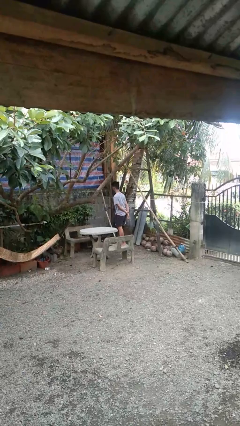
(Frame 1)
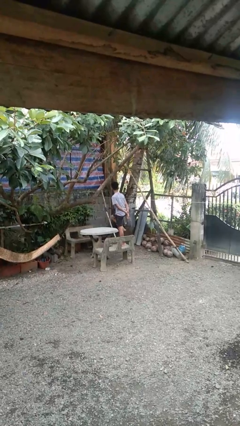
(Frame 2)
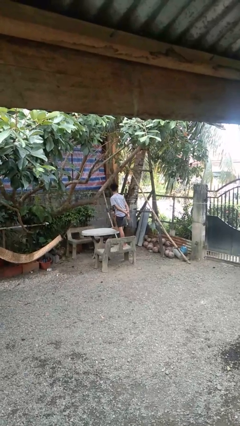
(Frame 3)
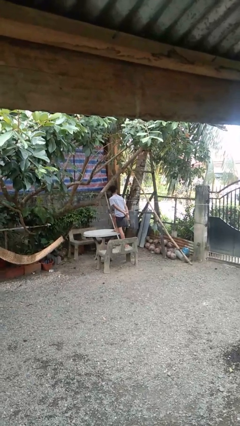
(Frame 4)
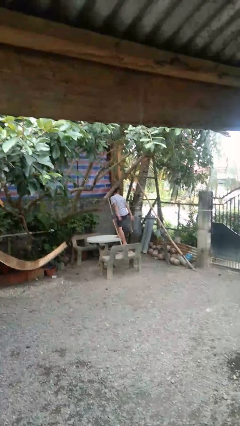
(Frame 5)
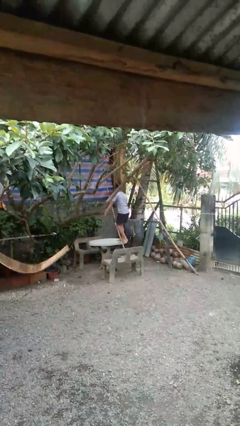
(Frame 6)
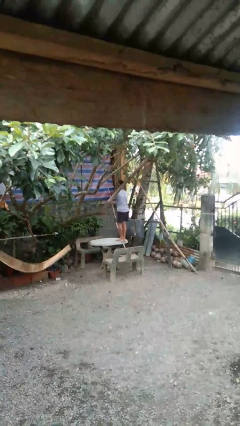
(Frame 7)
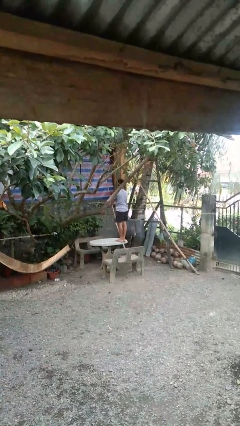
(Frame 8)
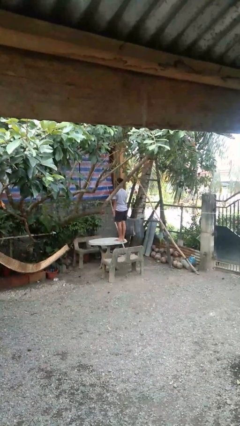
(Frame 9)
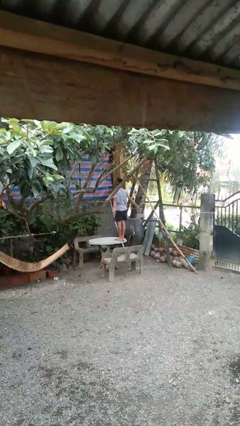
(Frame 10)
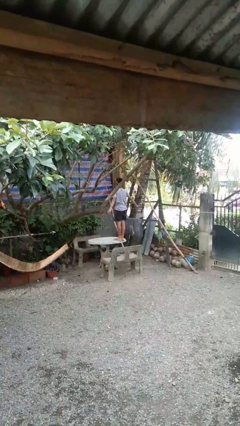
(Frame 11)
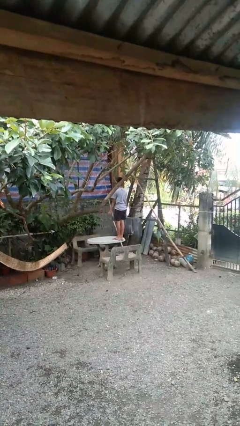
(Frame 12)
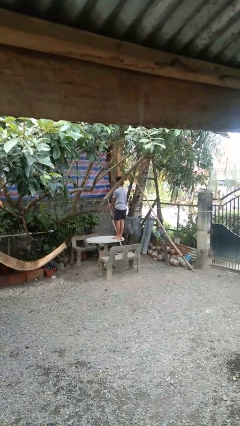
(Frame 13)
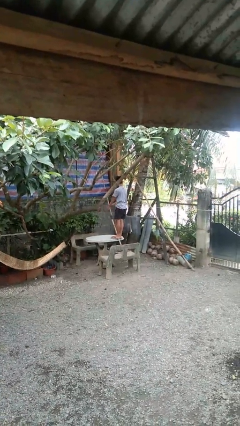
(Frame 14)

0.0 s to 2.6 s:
person climbs on table

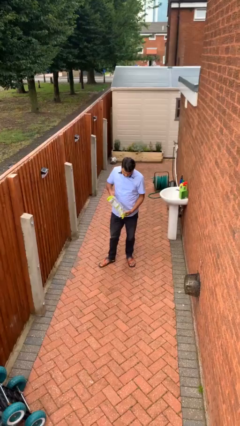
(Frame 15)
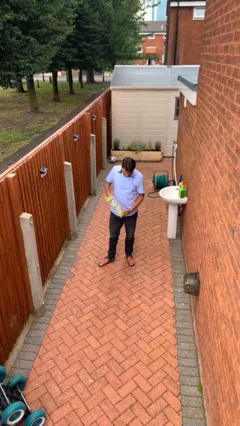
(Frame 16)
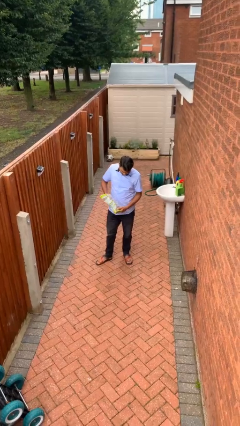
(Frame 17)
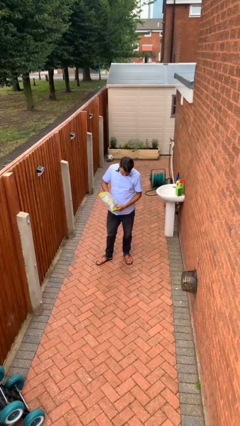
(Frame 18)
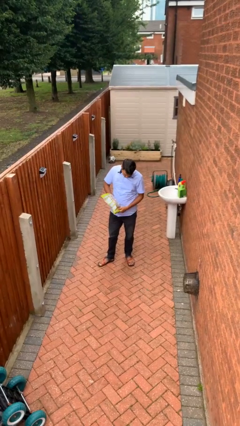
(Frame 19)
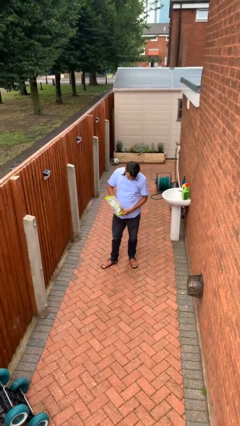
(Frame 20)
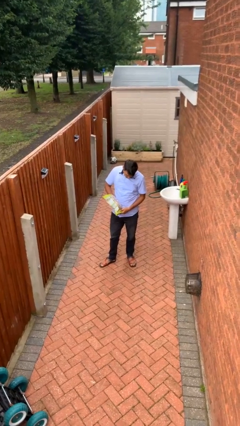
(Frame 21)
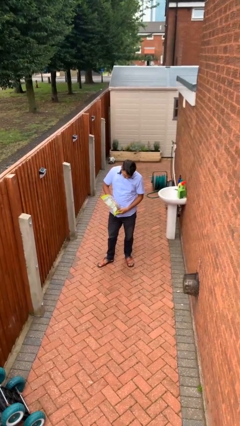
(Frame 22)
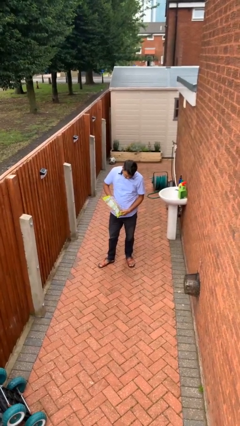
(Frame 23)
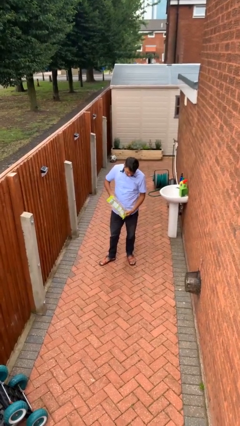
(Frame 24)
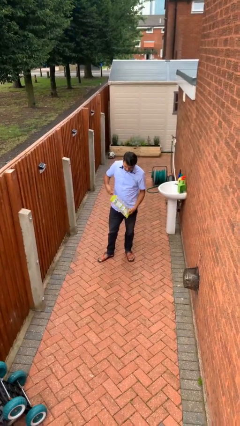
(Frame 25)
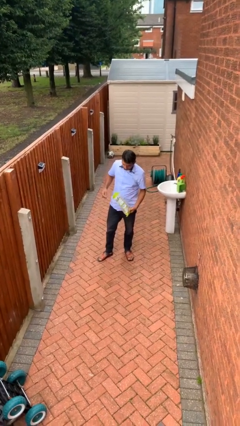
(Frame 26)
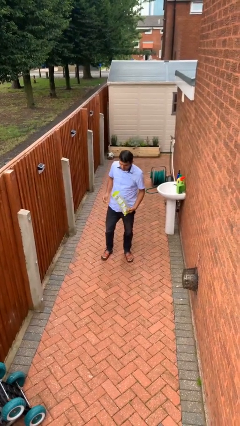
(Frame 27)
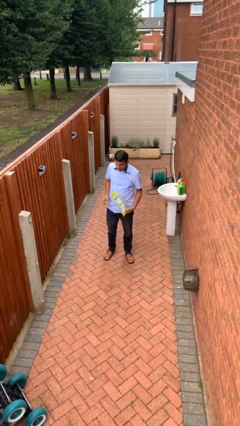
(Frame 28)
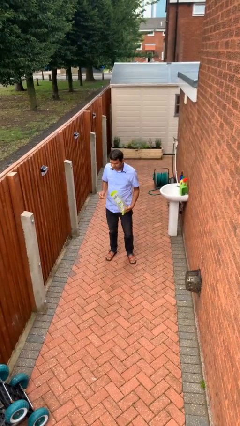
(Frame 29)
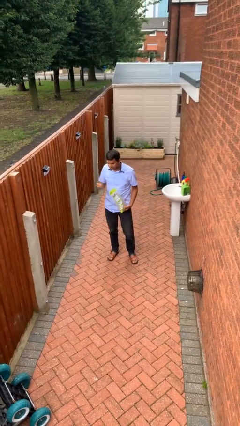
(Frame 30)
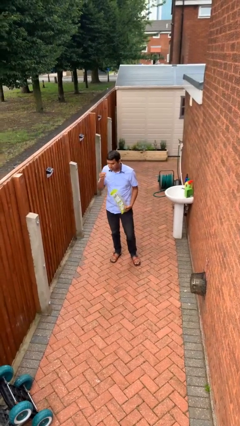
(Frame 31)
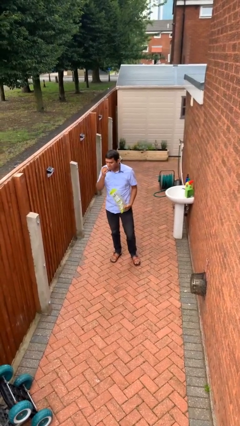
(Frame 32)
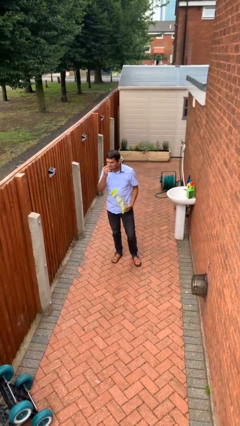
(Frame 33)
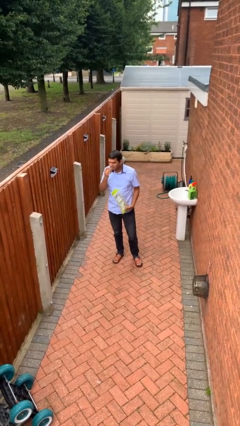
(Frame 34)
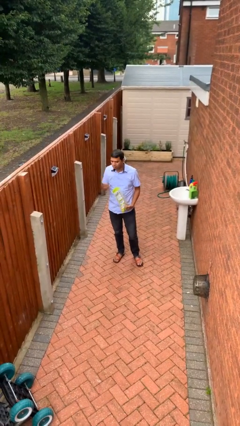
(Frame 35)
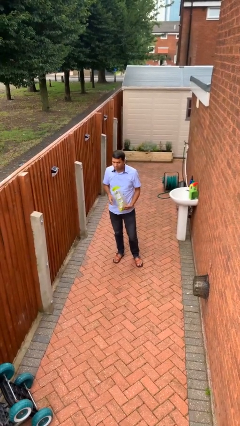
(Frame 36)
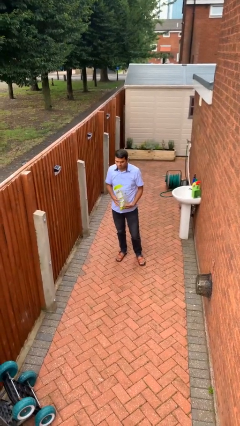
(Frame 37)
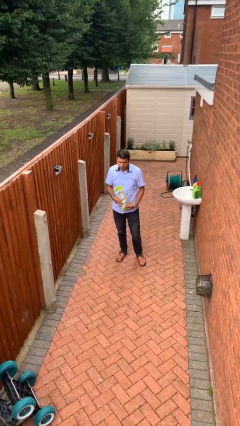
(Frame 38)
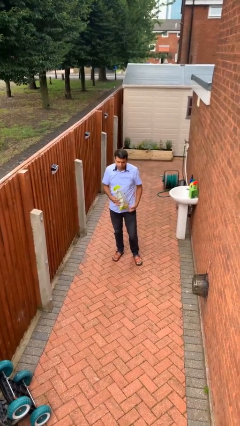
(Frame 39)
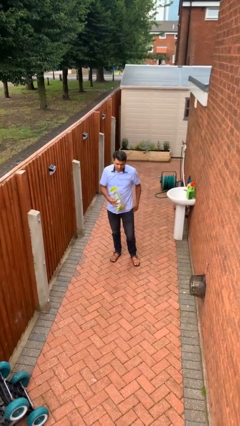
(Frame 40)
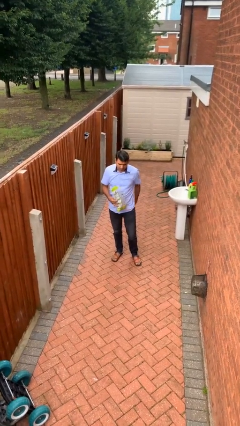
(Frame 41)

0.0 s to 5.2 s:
person eats snack from bag

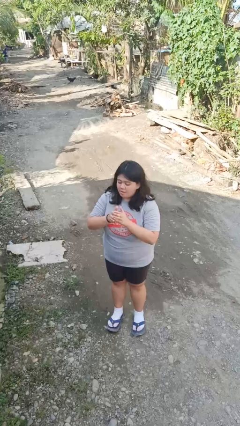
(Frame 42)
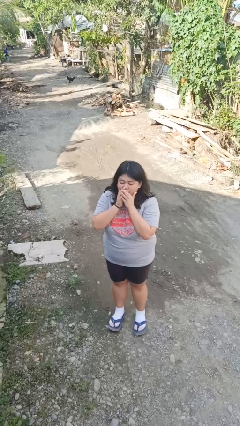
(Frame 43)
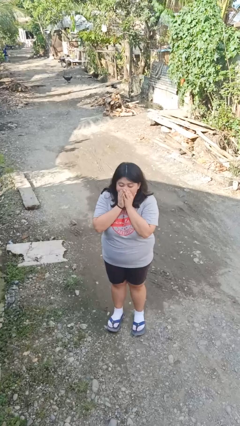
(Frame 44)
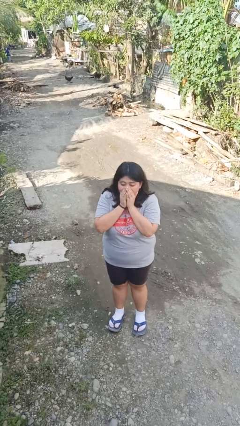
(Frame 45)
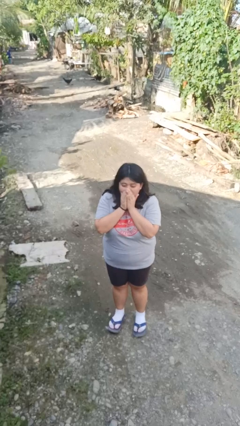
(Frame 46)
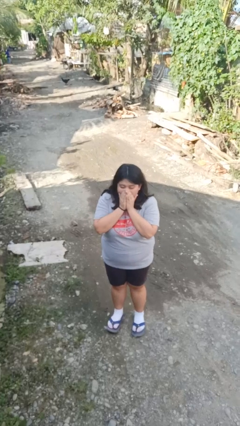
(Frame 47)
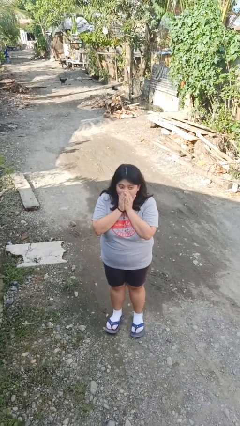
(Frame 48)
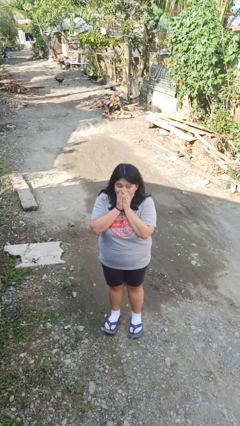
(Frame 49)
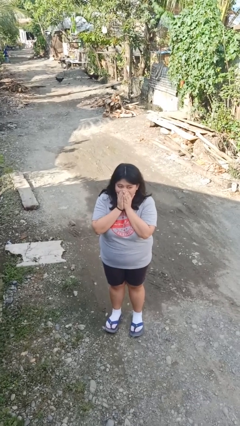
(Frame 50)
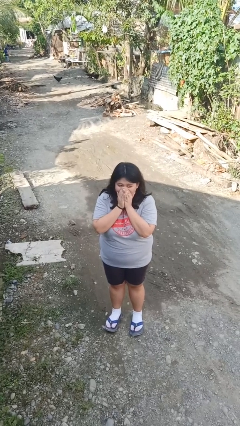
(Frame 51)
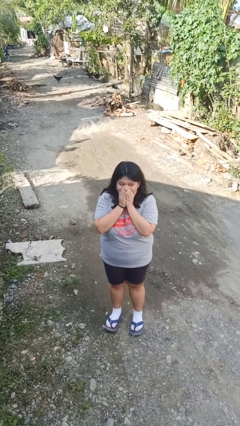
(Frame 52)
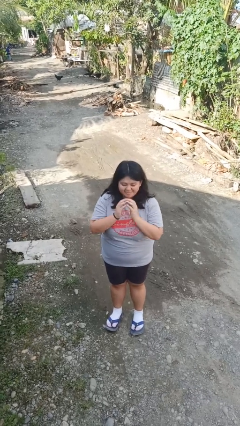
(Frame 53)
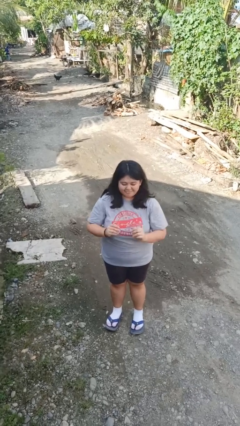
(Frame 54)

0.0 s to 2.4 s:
person blows into hands

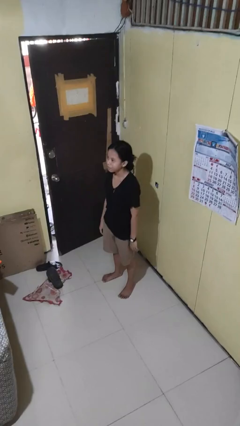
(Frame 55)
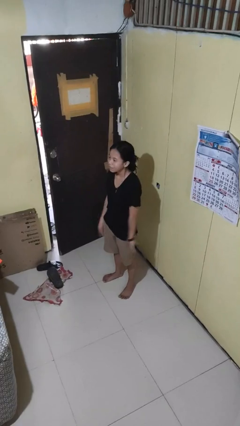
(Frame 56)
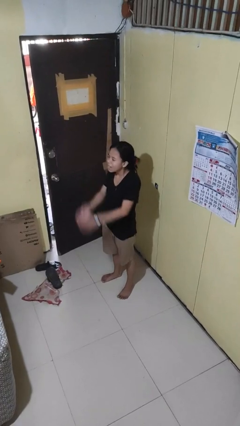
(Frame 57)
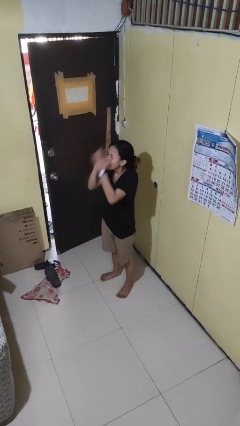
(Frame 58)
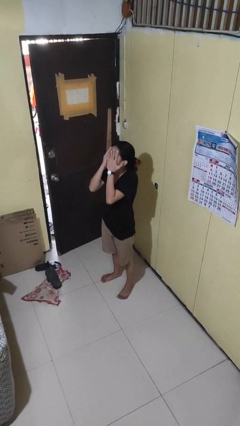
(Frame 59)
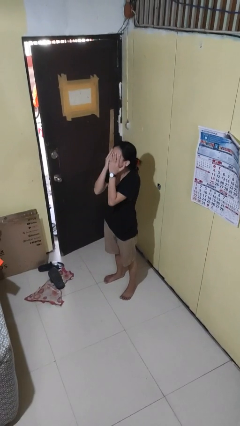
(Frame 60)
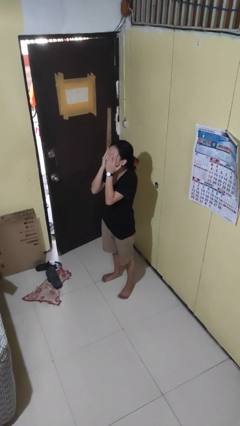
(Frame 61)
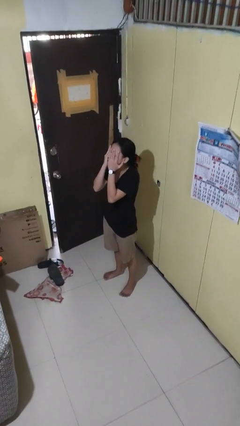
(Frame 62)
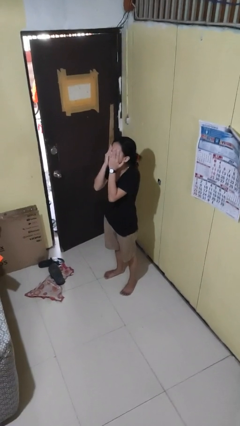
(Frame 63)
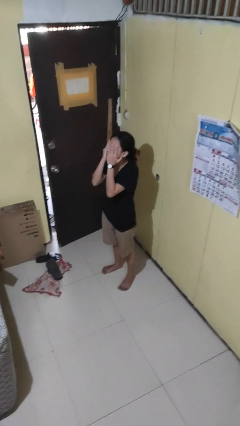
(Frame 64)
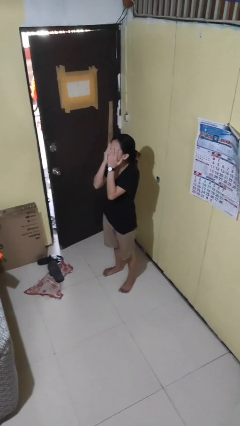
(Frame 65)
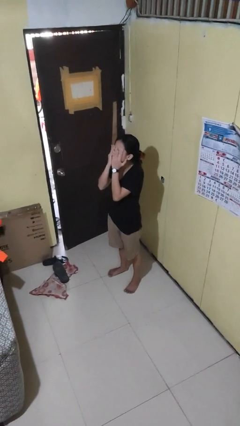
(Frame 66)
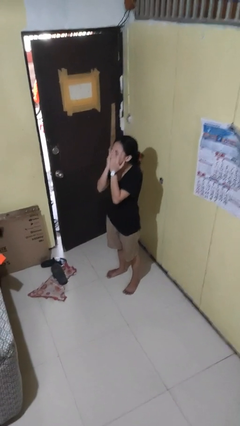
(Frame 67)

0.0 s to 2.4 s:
person covers face with hands

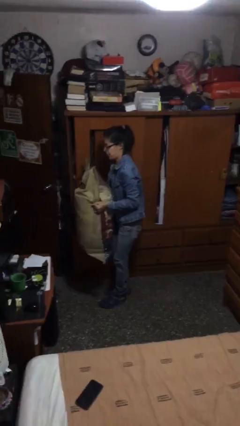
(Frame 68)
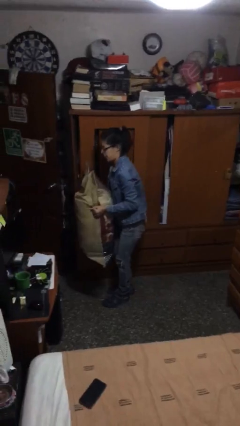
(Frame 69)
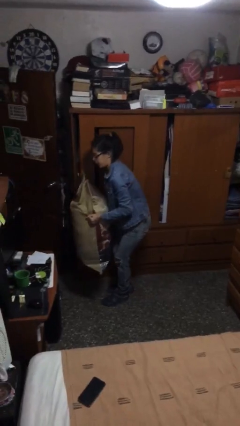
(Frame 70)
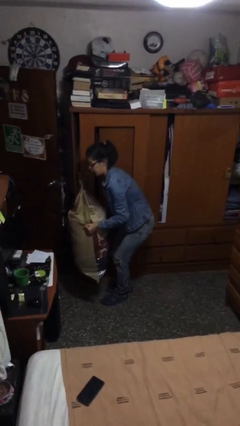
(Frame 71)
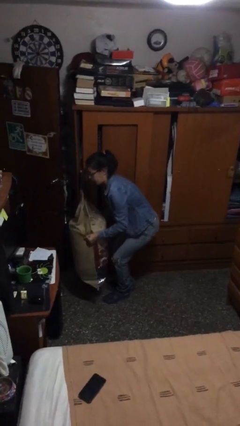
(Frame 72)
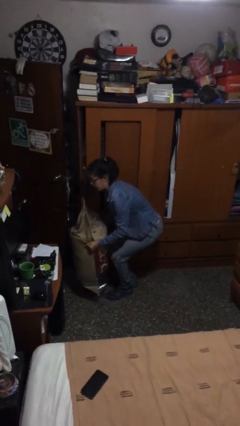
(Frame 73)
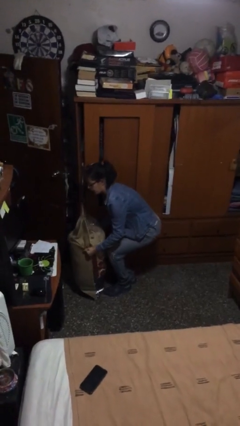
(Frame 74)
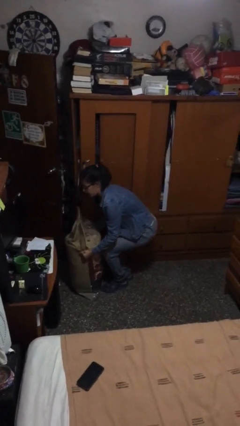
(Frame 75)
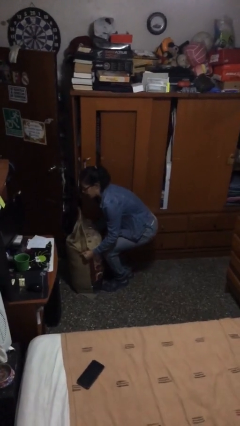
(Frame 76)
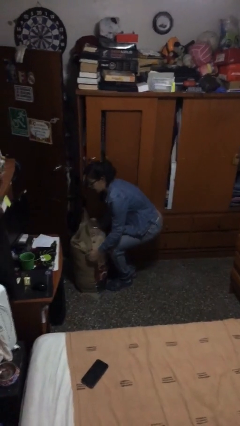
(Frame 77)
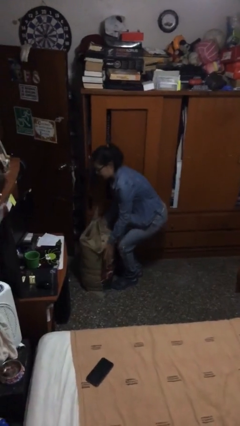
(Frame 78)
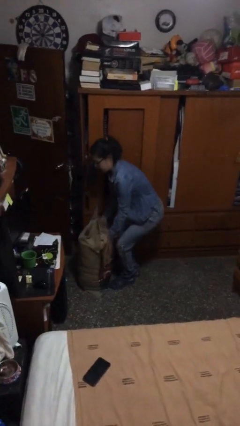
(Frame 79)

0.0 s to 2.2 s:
person puts down object on floor

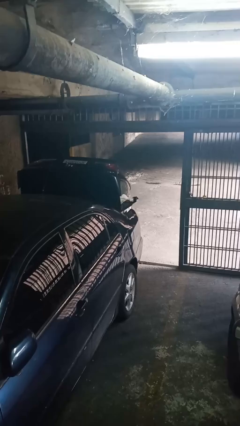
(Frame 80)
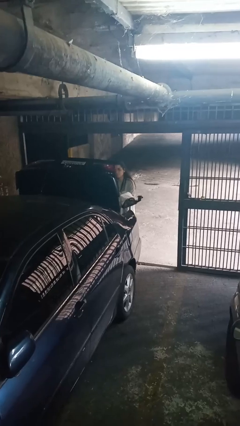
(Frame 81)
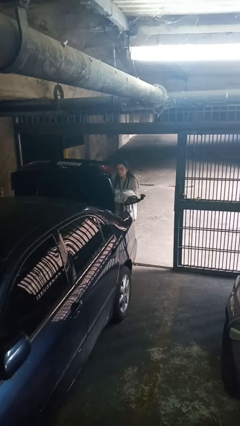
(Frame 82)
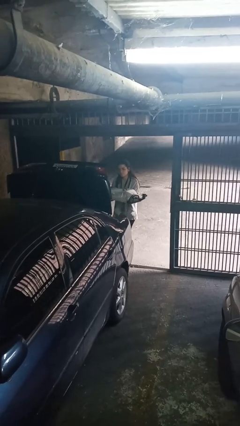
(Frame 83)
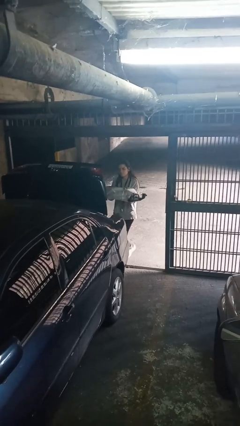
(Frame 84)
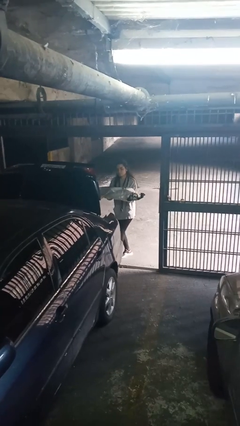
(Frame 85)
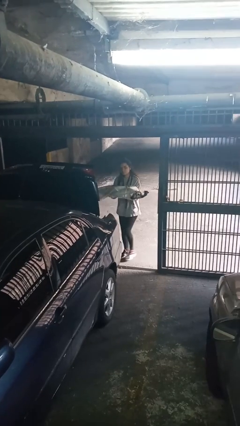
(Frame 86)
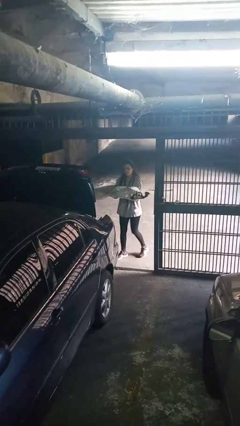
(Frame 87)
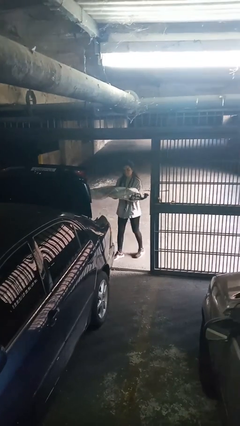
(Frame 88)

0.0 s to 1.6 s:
person unloads car

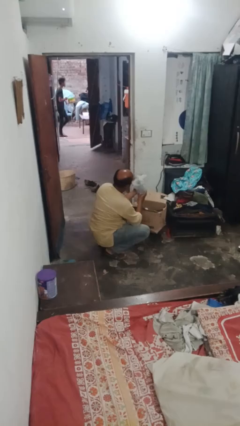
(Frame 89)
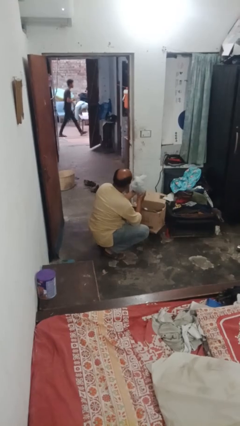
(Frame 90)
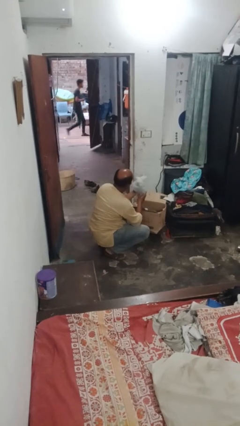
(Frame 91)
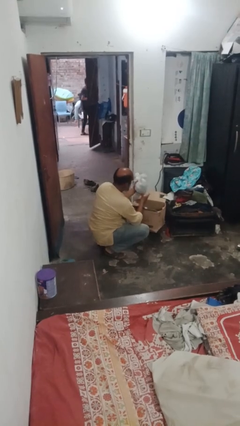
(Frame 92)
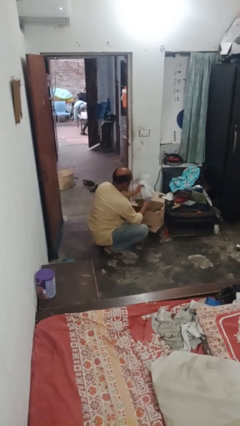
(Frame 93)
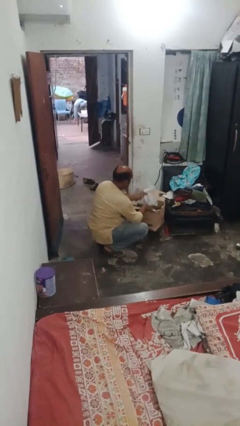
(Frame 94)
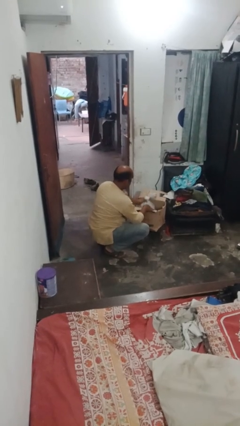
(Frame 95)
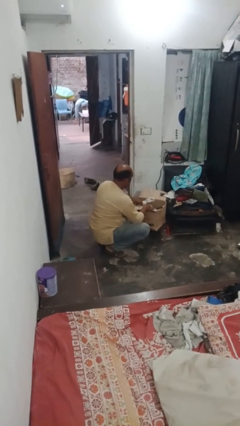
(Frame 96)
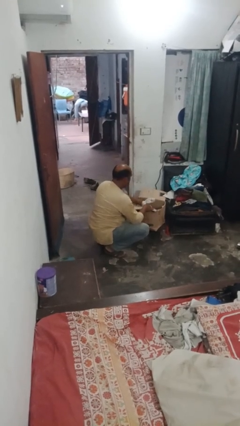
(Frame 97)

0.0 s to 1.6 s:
person puts object into box
